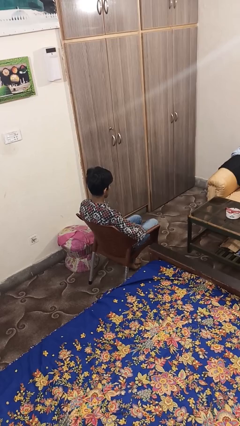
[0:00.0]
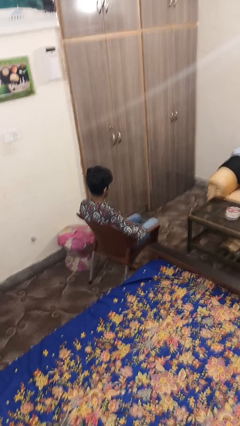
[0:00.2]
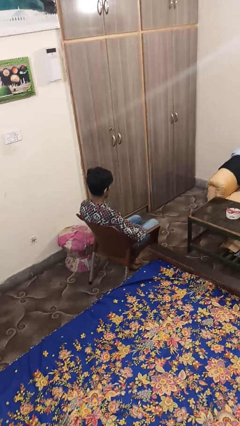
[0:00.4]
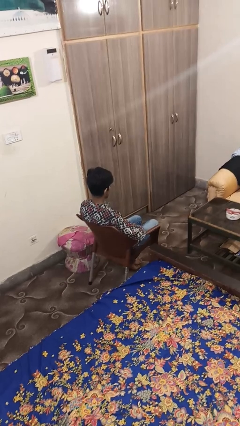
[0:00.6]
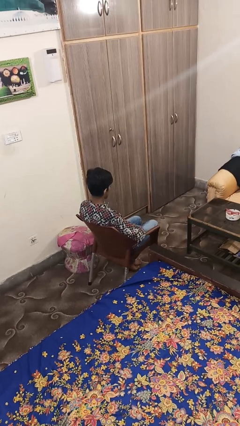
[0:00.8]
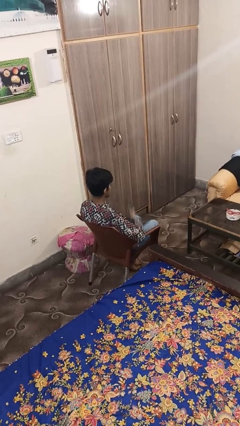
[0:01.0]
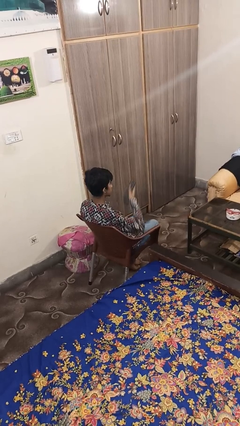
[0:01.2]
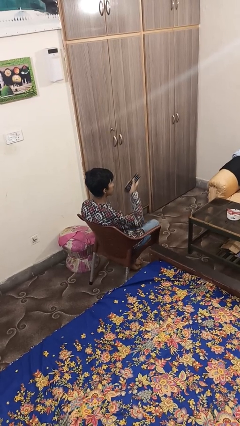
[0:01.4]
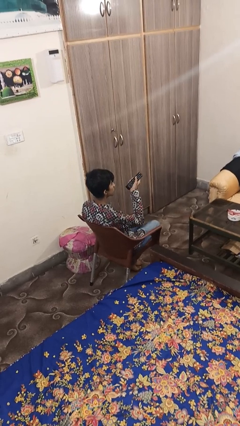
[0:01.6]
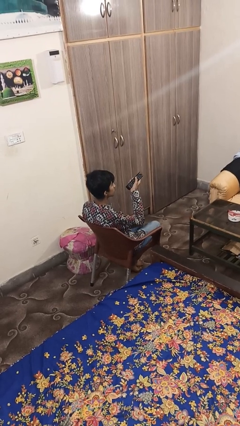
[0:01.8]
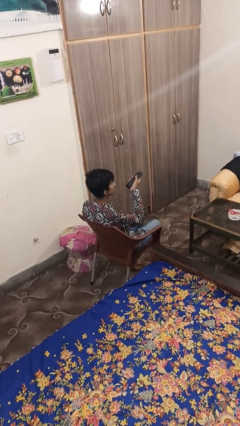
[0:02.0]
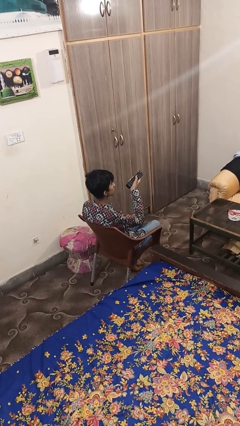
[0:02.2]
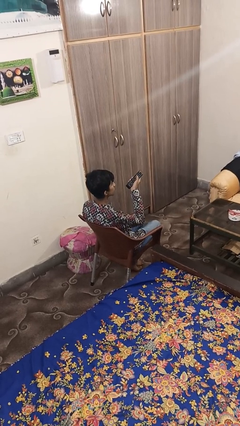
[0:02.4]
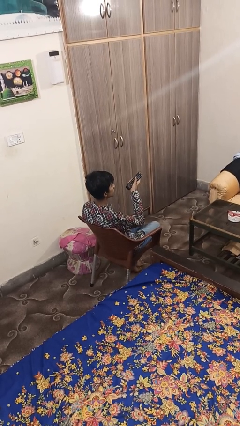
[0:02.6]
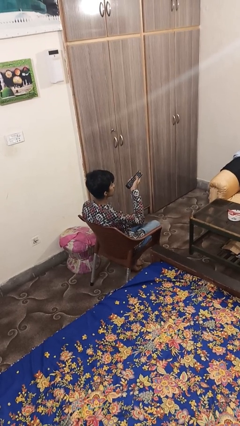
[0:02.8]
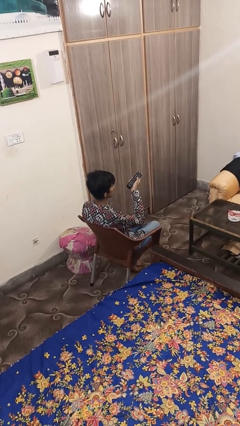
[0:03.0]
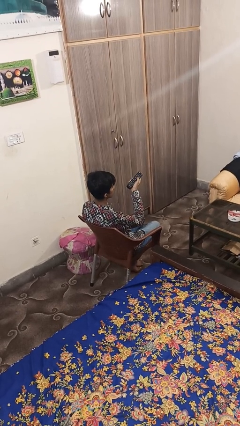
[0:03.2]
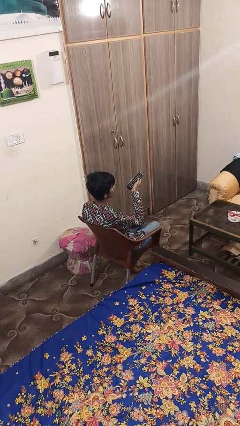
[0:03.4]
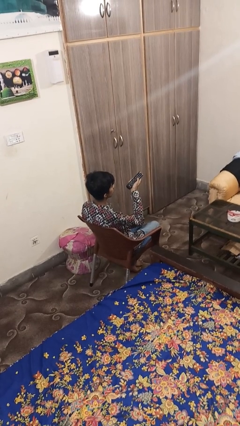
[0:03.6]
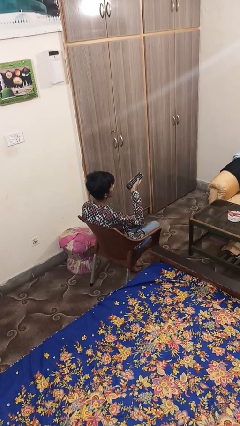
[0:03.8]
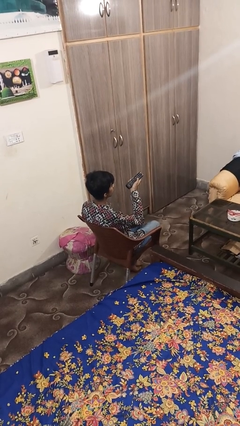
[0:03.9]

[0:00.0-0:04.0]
person uses television remote

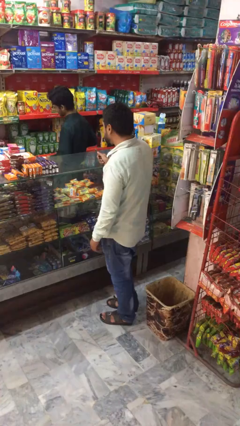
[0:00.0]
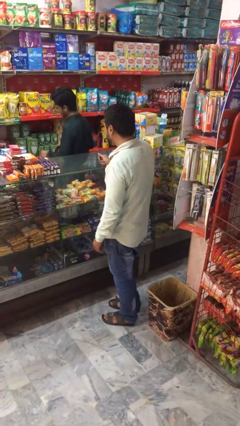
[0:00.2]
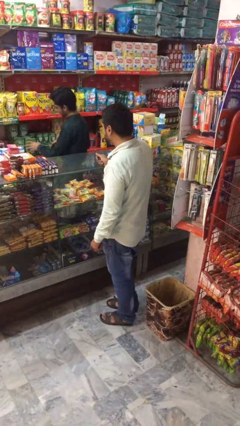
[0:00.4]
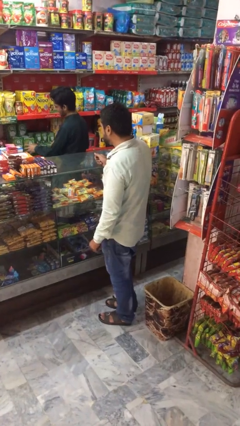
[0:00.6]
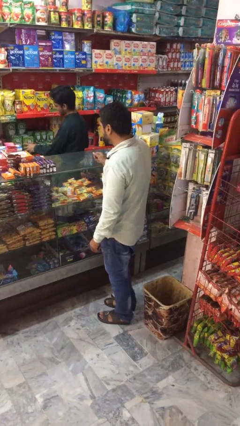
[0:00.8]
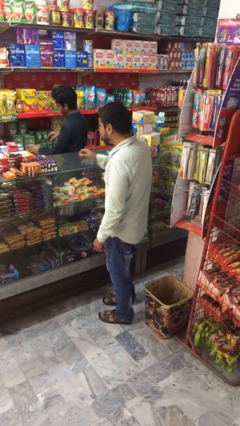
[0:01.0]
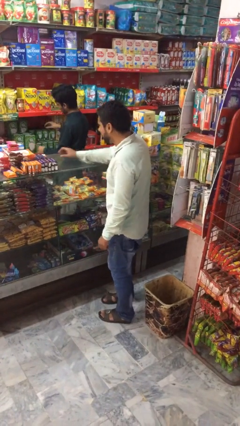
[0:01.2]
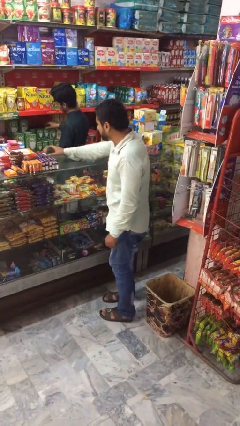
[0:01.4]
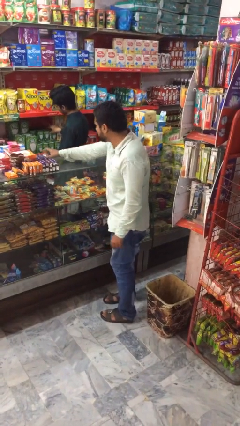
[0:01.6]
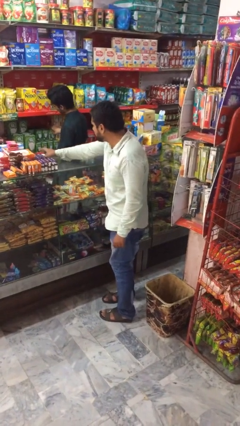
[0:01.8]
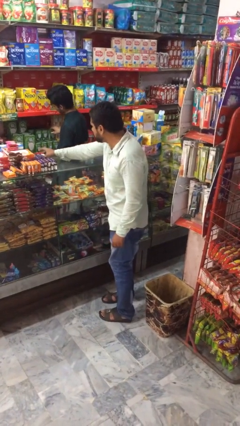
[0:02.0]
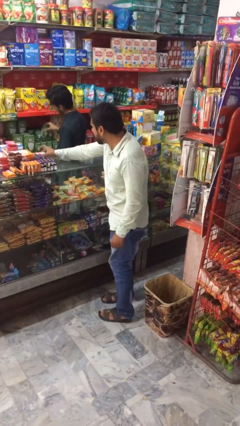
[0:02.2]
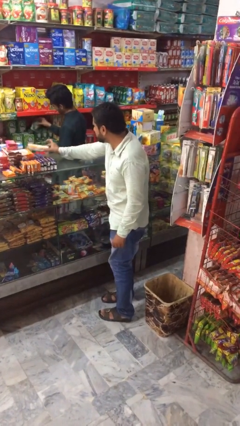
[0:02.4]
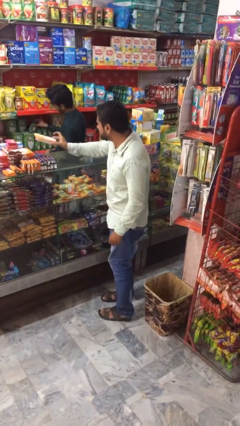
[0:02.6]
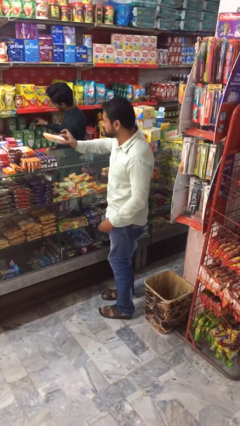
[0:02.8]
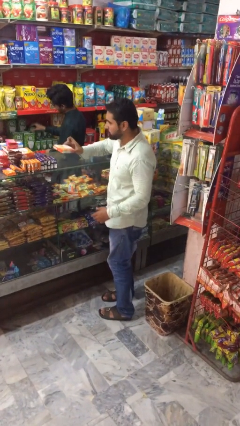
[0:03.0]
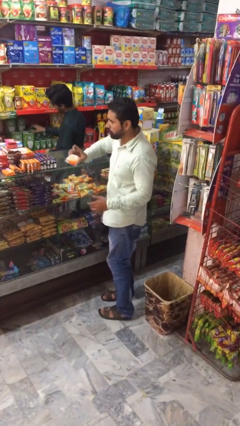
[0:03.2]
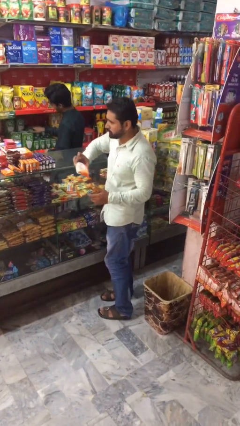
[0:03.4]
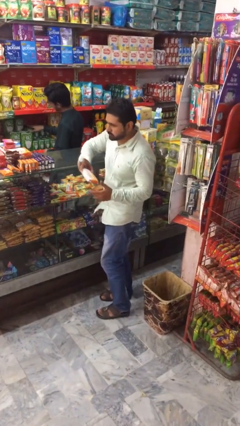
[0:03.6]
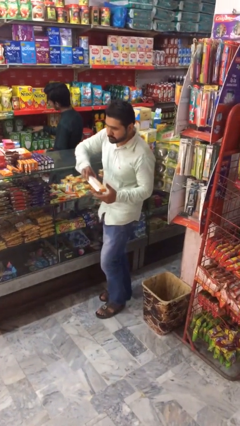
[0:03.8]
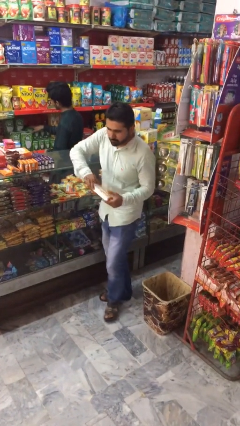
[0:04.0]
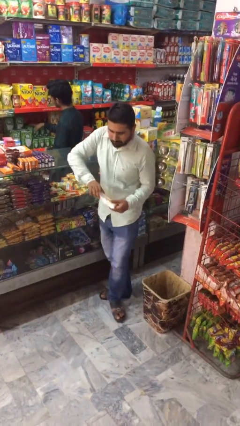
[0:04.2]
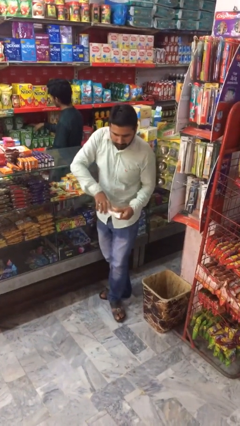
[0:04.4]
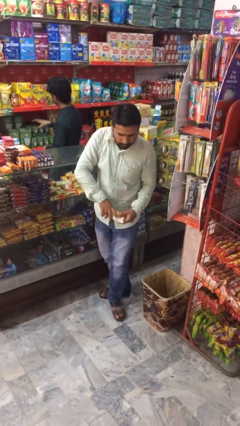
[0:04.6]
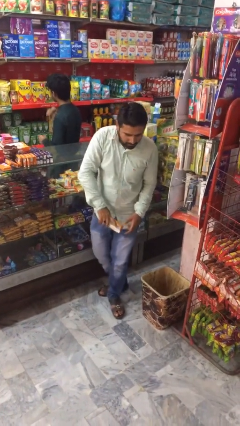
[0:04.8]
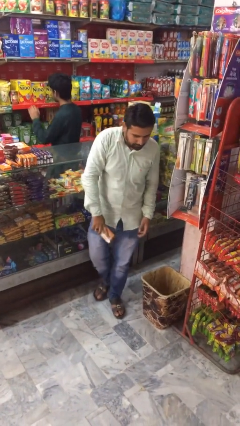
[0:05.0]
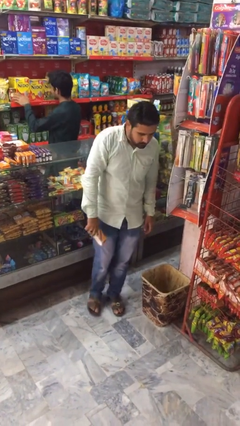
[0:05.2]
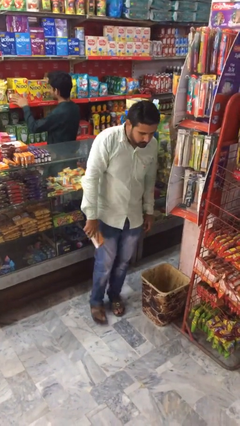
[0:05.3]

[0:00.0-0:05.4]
person steals object from person

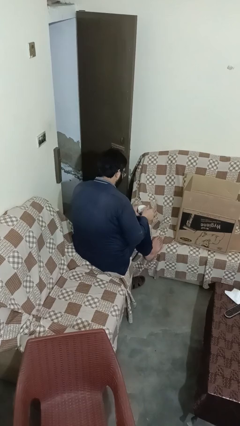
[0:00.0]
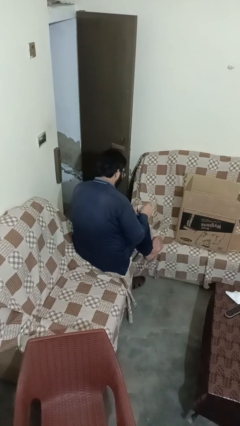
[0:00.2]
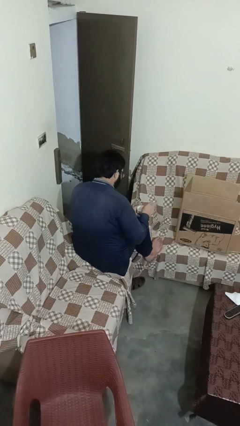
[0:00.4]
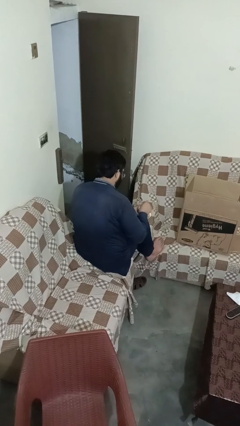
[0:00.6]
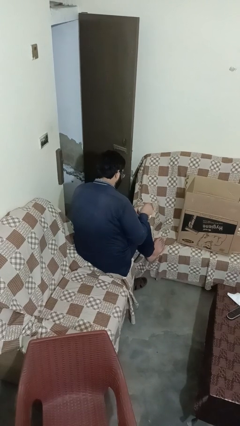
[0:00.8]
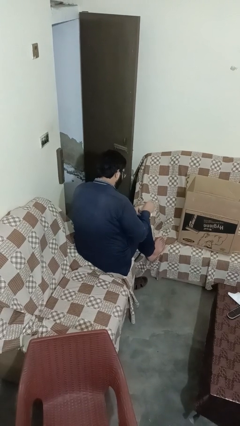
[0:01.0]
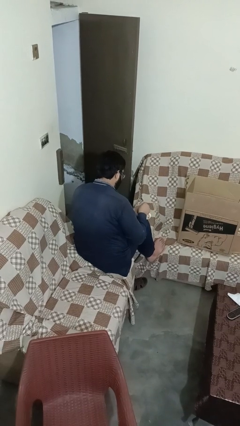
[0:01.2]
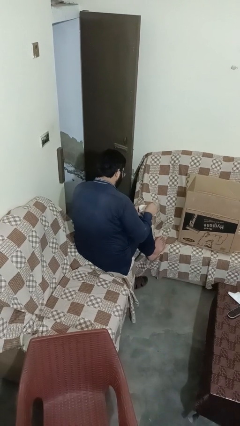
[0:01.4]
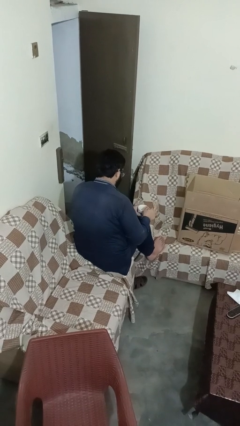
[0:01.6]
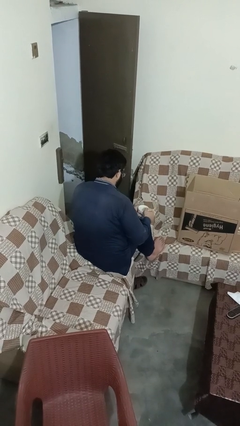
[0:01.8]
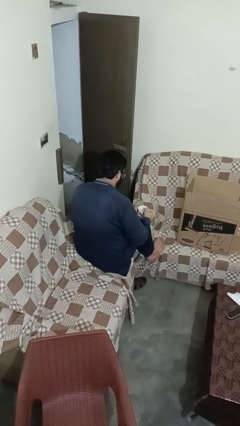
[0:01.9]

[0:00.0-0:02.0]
person stirs mug

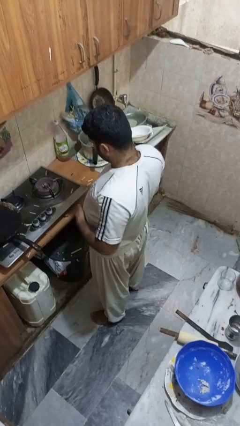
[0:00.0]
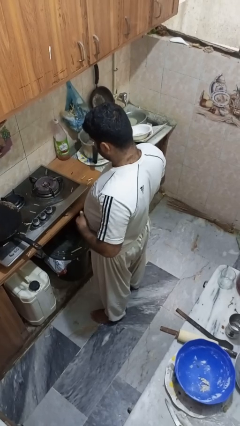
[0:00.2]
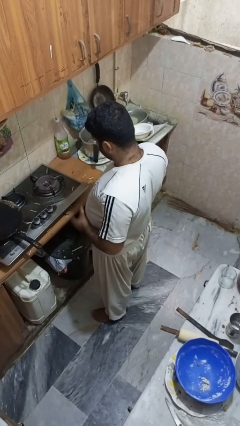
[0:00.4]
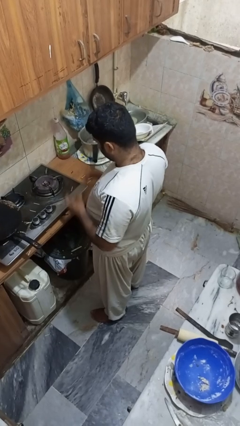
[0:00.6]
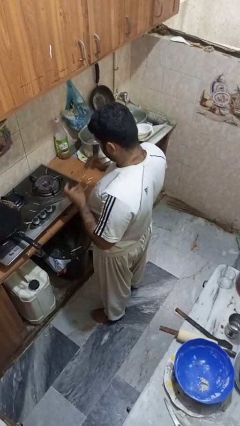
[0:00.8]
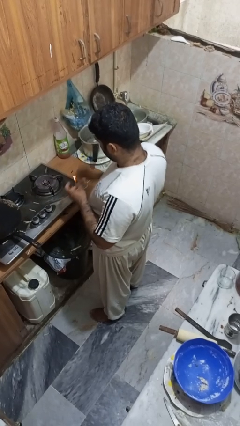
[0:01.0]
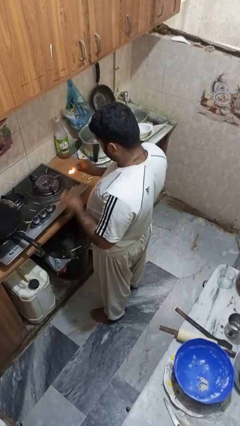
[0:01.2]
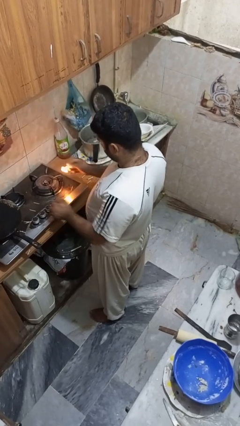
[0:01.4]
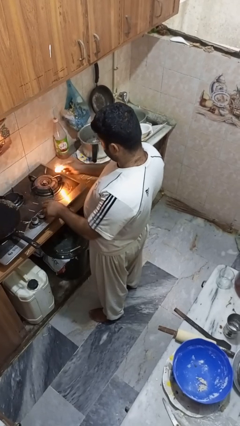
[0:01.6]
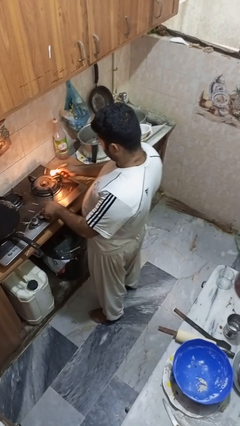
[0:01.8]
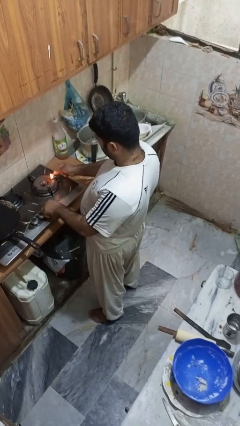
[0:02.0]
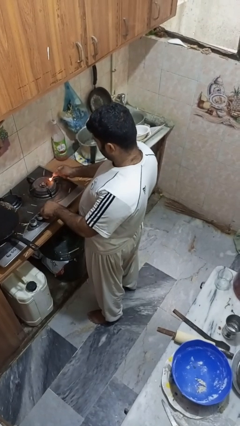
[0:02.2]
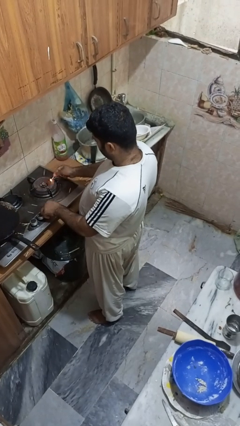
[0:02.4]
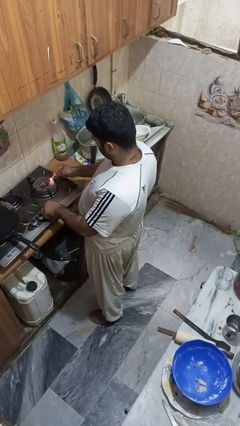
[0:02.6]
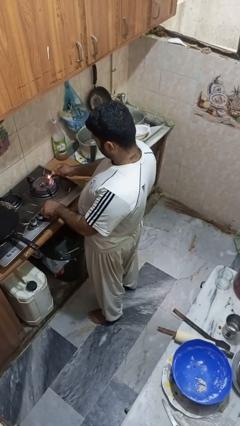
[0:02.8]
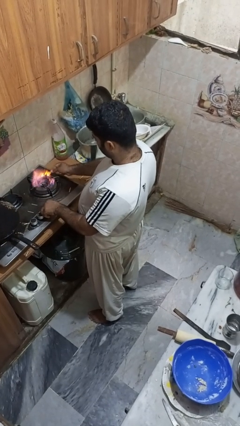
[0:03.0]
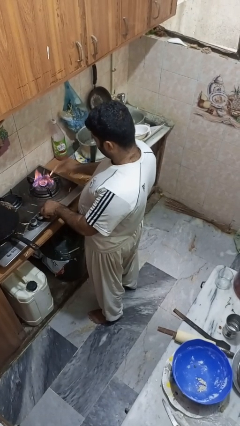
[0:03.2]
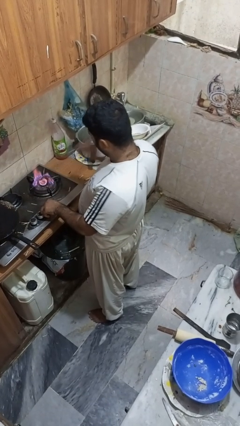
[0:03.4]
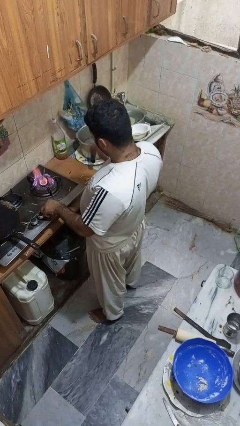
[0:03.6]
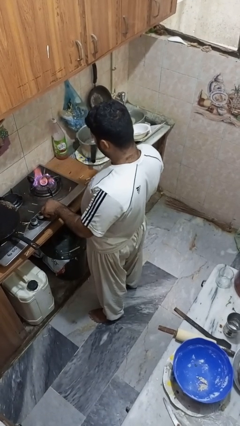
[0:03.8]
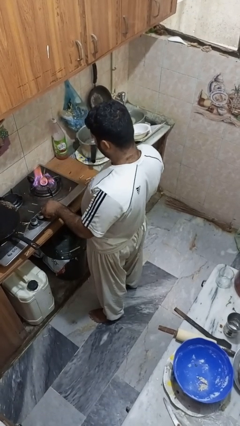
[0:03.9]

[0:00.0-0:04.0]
person turns on stovetop

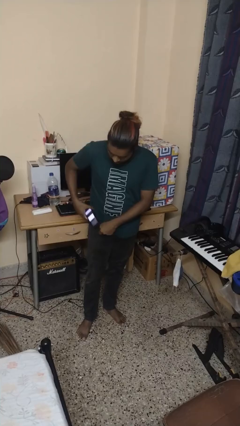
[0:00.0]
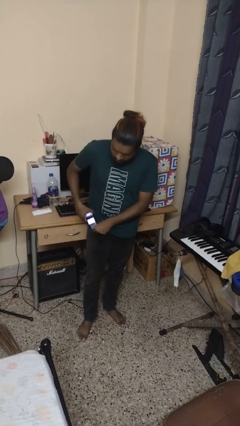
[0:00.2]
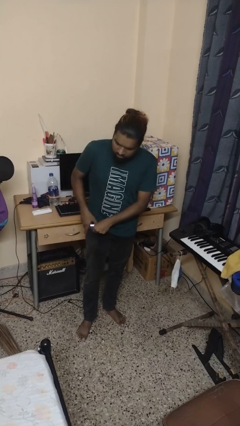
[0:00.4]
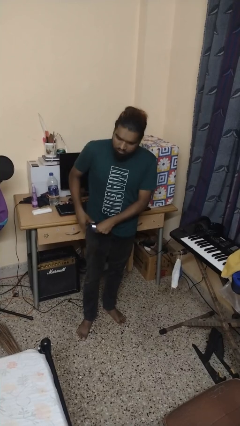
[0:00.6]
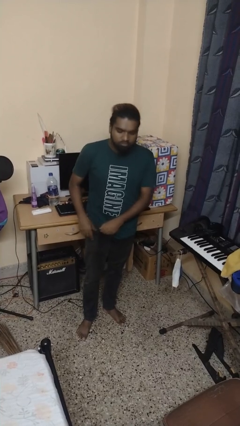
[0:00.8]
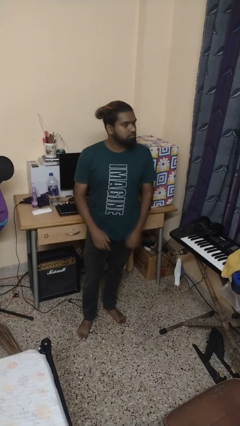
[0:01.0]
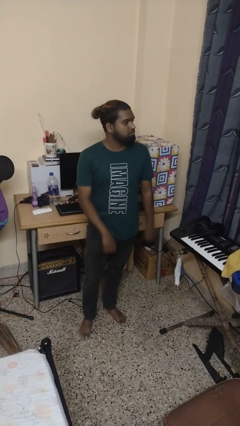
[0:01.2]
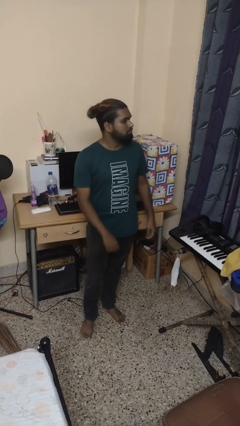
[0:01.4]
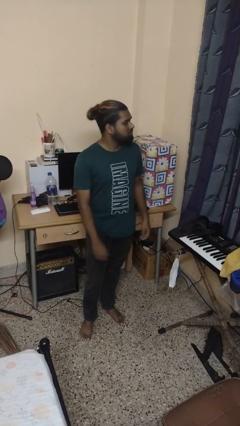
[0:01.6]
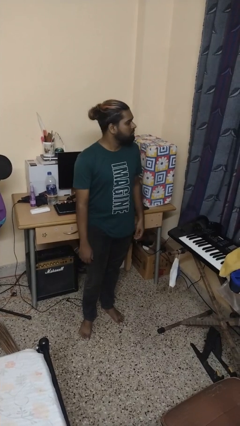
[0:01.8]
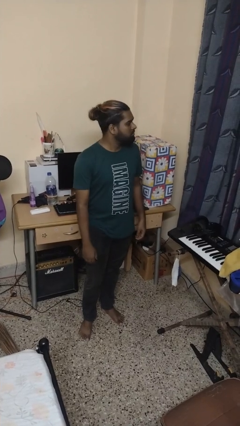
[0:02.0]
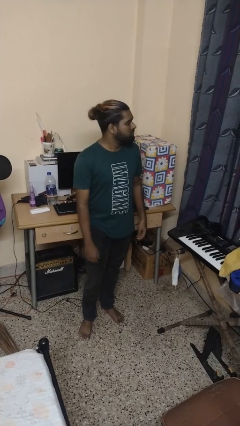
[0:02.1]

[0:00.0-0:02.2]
person puts phone into pocket
